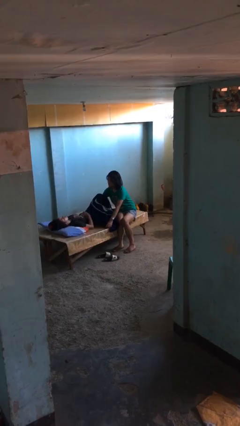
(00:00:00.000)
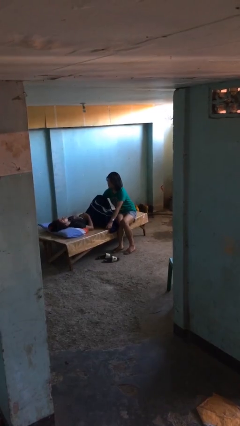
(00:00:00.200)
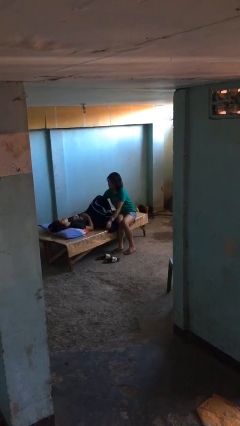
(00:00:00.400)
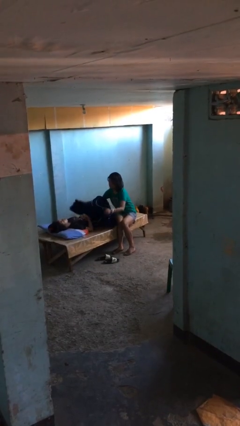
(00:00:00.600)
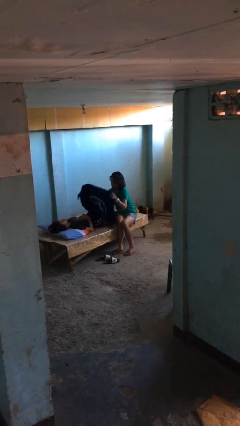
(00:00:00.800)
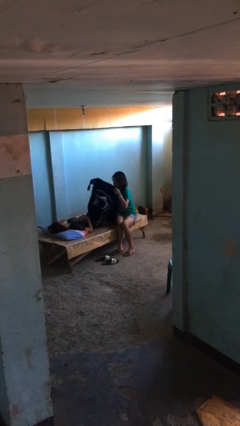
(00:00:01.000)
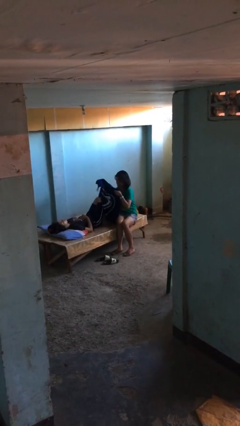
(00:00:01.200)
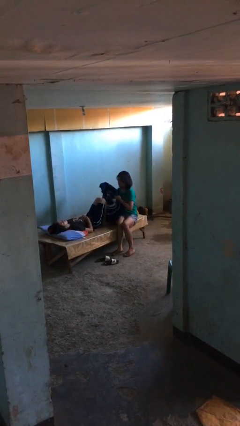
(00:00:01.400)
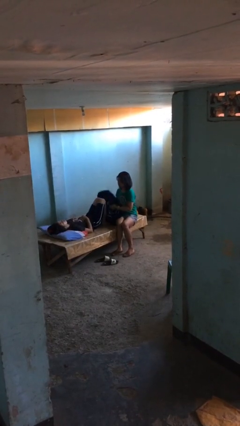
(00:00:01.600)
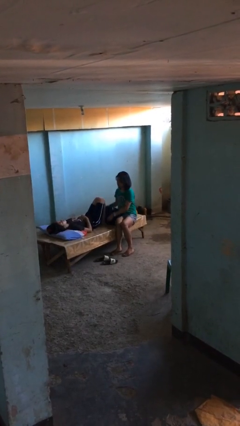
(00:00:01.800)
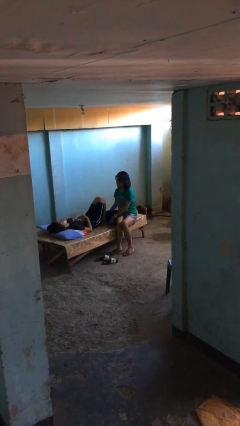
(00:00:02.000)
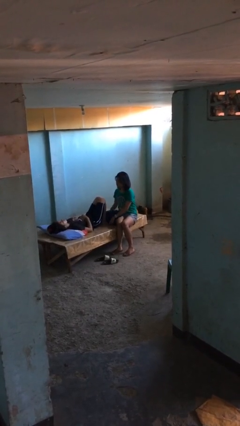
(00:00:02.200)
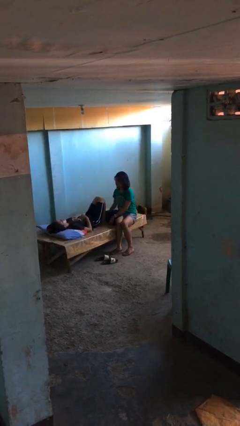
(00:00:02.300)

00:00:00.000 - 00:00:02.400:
person uncovers friend with blanket

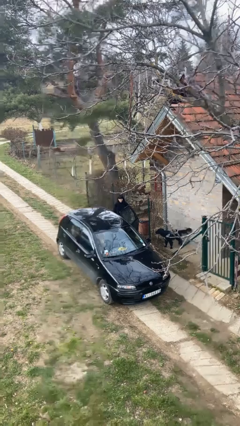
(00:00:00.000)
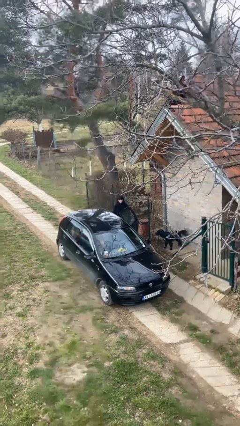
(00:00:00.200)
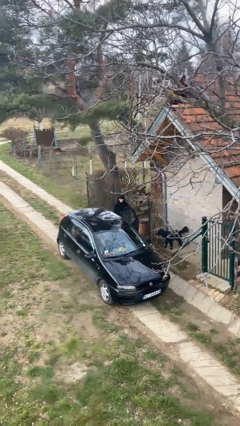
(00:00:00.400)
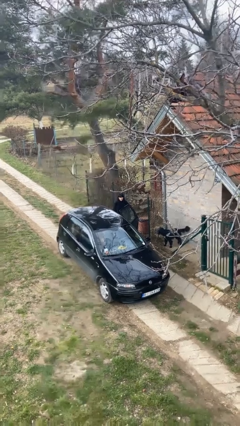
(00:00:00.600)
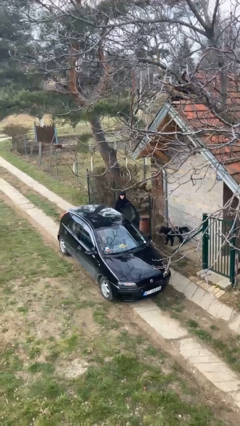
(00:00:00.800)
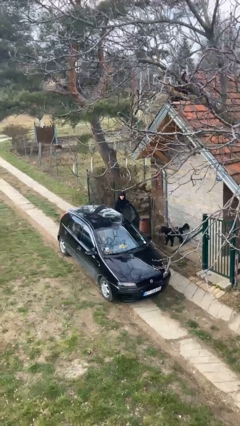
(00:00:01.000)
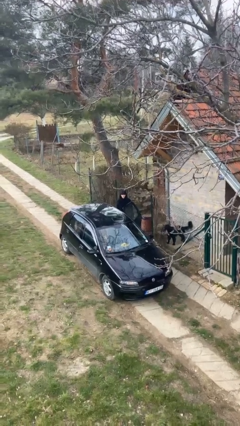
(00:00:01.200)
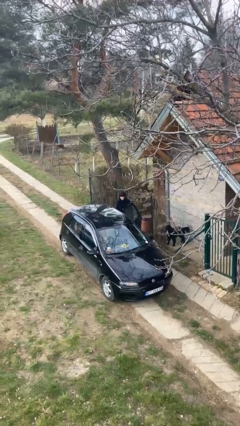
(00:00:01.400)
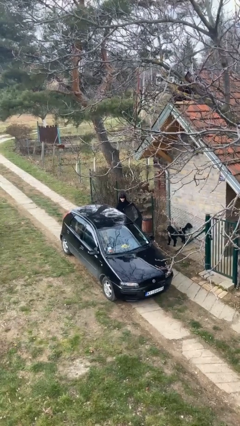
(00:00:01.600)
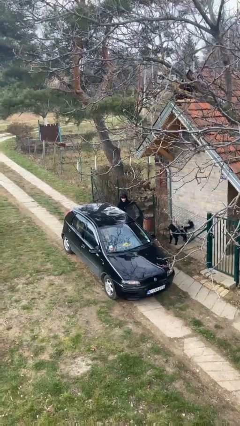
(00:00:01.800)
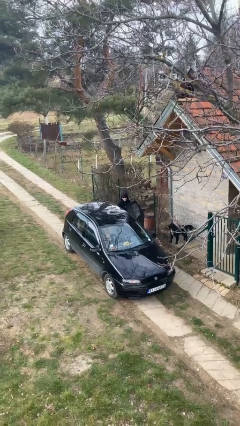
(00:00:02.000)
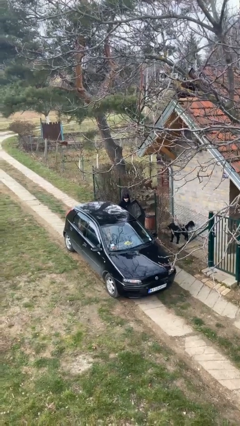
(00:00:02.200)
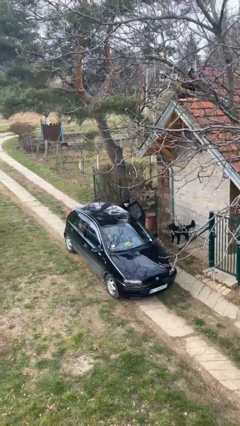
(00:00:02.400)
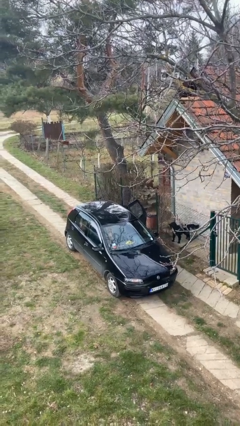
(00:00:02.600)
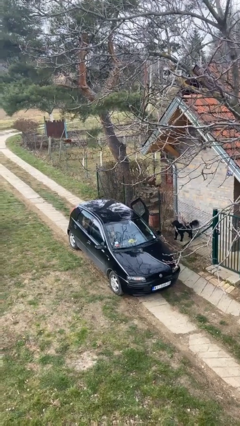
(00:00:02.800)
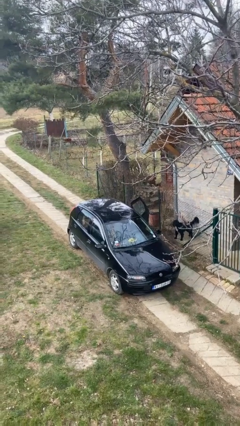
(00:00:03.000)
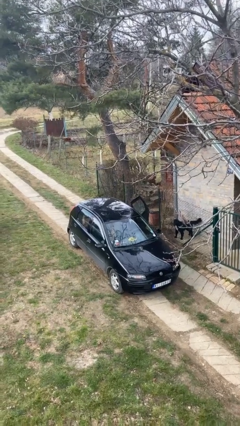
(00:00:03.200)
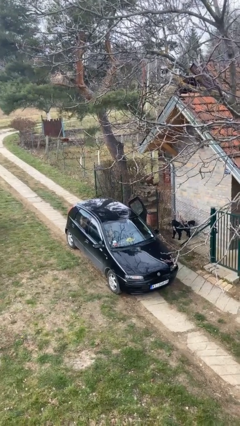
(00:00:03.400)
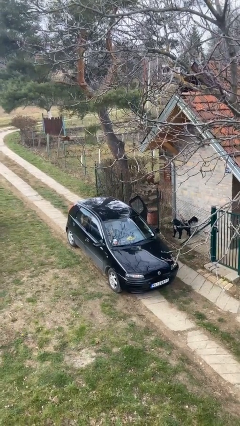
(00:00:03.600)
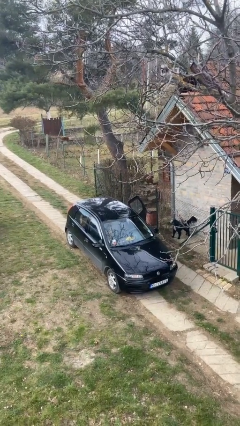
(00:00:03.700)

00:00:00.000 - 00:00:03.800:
person enters car

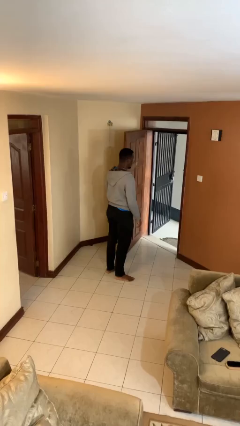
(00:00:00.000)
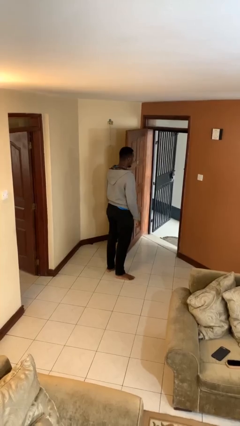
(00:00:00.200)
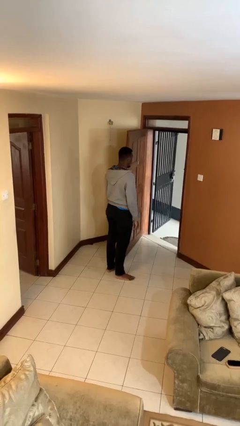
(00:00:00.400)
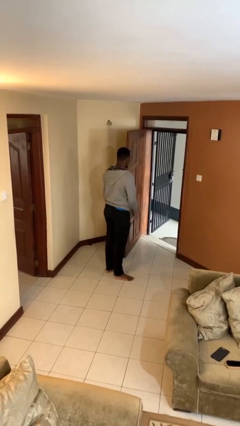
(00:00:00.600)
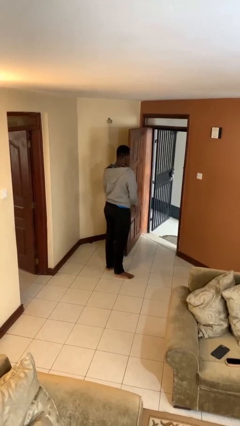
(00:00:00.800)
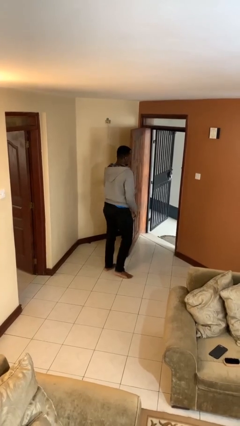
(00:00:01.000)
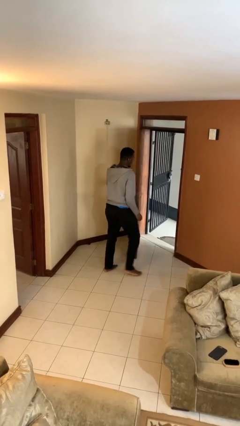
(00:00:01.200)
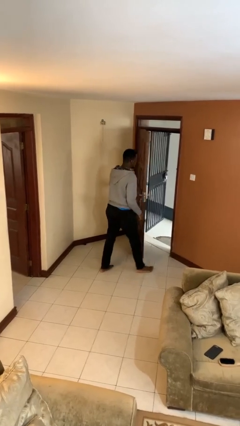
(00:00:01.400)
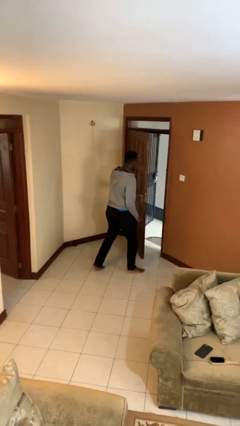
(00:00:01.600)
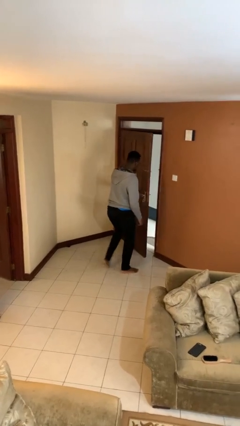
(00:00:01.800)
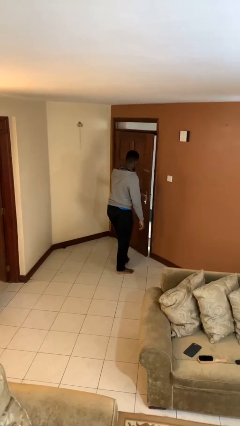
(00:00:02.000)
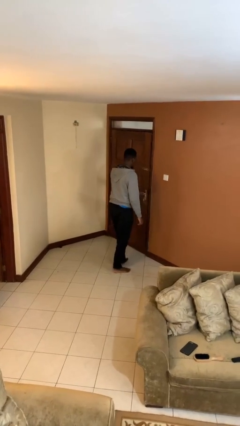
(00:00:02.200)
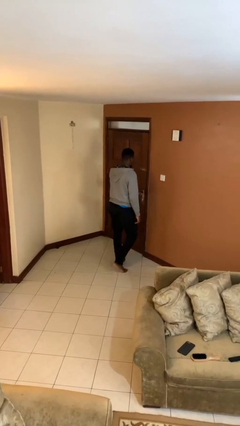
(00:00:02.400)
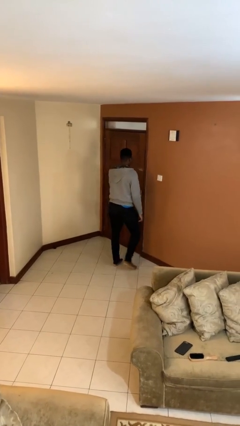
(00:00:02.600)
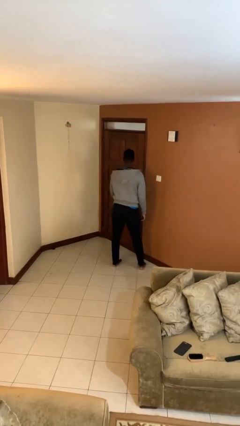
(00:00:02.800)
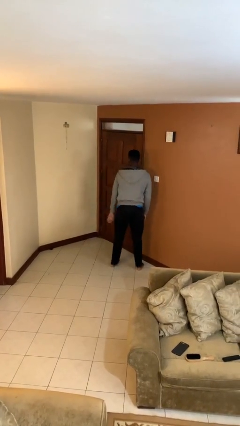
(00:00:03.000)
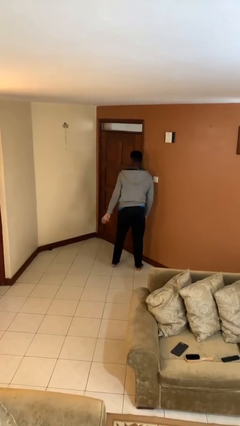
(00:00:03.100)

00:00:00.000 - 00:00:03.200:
person closes facility door

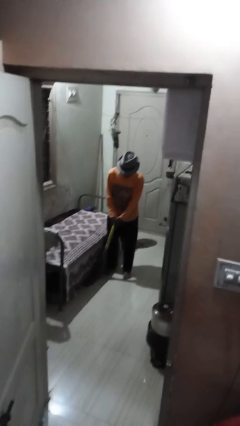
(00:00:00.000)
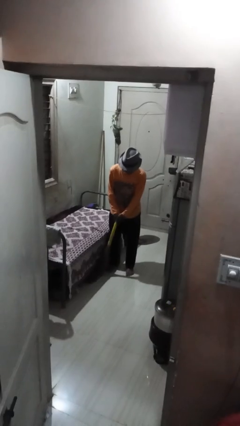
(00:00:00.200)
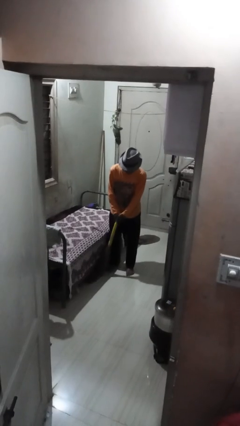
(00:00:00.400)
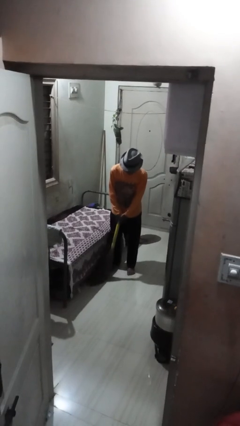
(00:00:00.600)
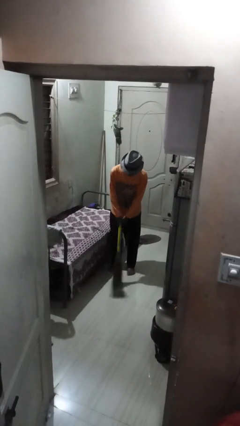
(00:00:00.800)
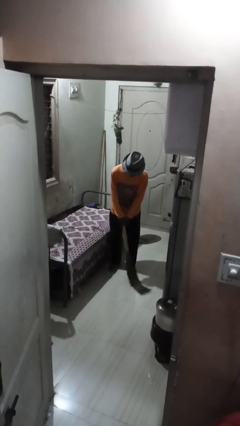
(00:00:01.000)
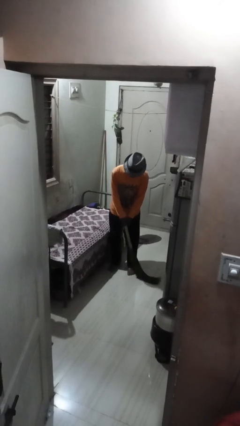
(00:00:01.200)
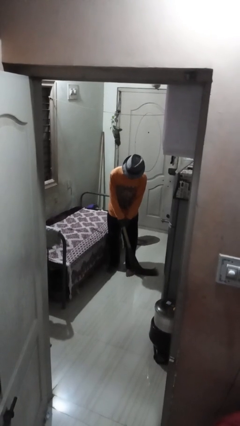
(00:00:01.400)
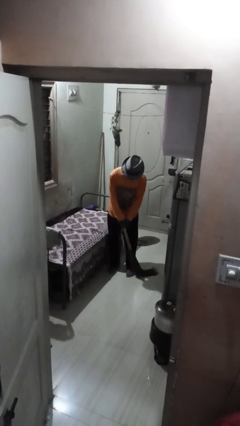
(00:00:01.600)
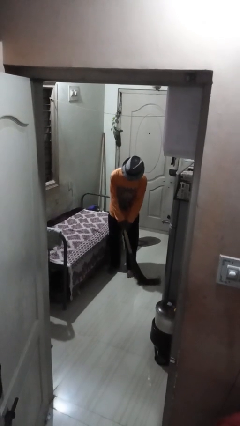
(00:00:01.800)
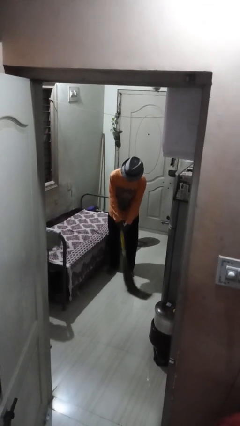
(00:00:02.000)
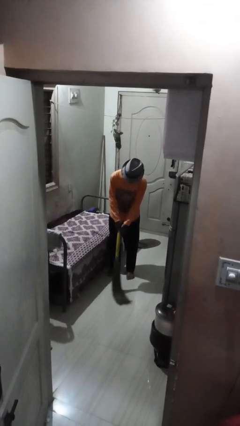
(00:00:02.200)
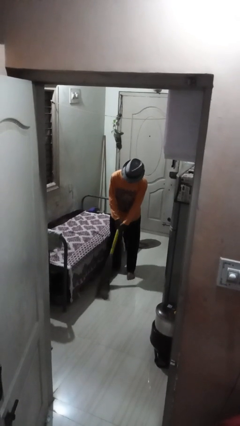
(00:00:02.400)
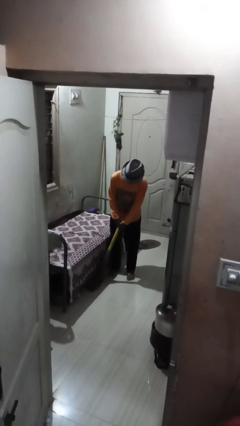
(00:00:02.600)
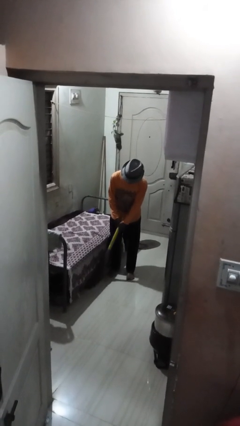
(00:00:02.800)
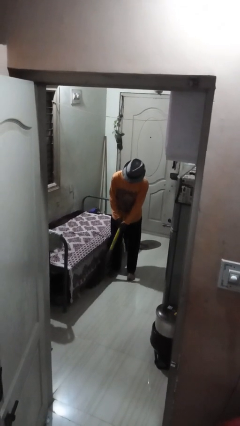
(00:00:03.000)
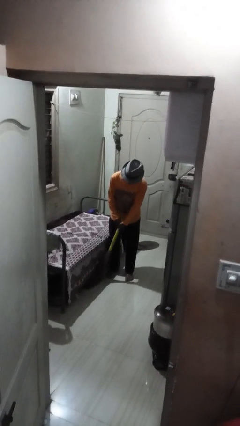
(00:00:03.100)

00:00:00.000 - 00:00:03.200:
person sweeps floor

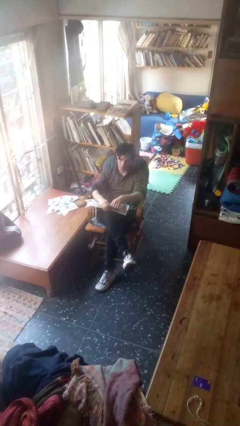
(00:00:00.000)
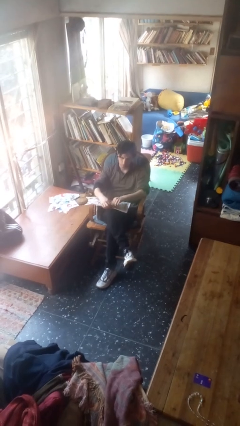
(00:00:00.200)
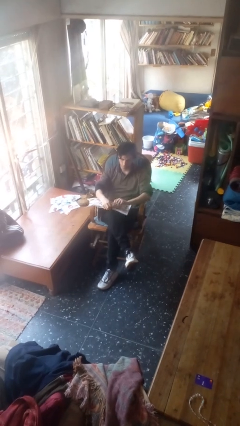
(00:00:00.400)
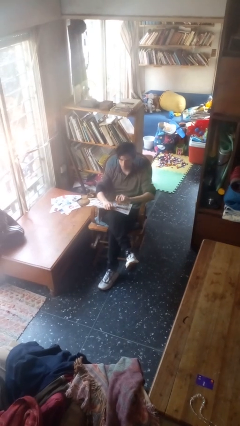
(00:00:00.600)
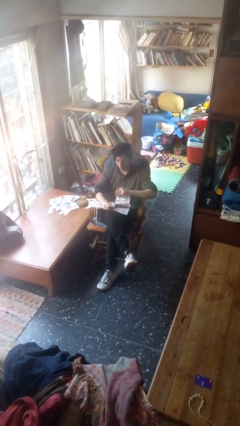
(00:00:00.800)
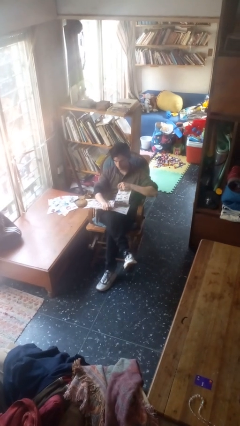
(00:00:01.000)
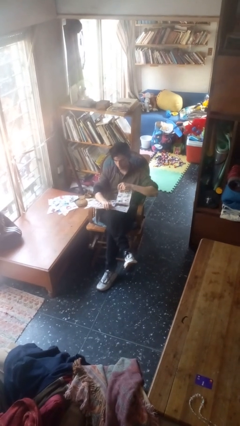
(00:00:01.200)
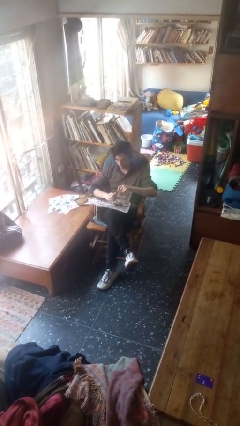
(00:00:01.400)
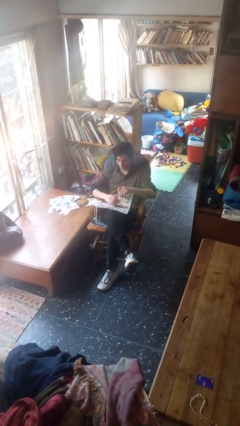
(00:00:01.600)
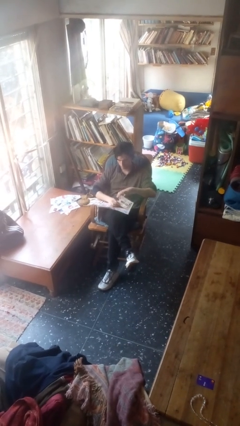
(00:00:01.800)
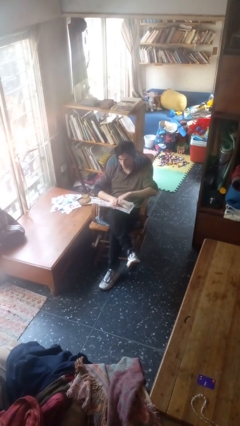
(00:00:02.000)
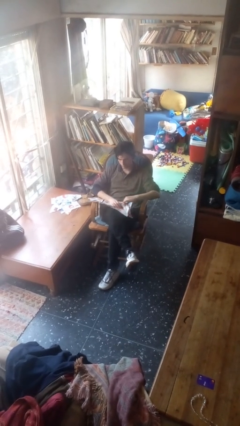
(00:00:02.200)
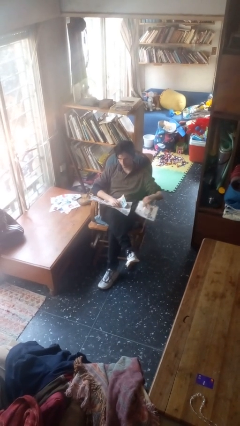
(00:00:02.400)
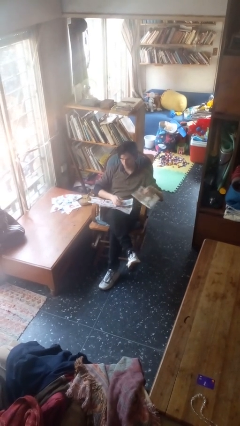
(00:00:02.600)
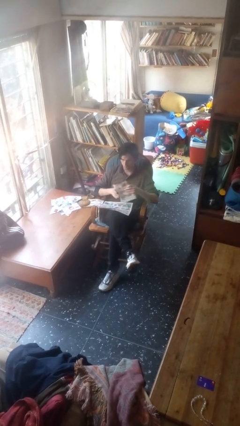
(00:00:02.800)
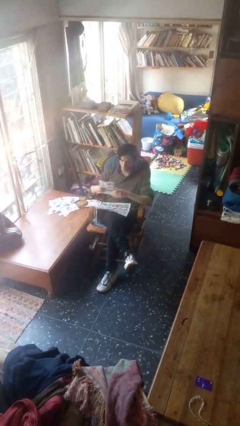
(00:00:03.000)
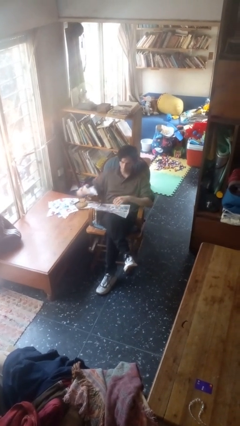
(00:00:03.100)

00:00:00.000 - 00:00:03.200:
person tears paper

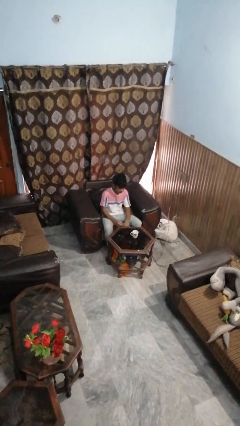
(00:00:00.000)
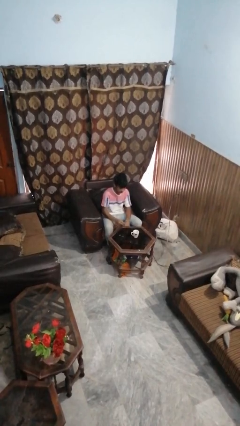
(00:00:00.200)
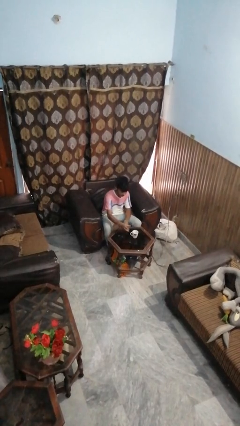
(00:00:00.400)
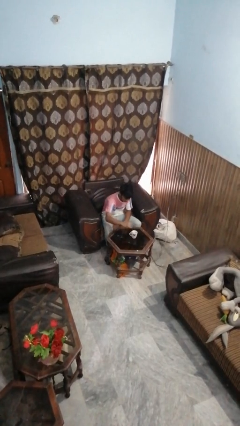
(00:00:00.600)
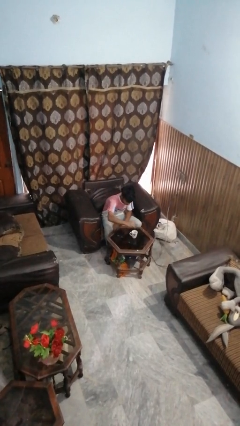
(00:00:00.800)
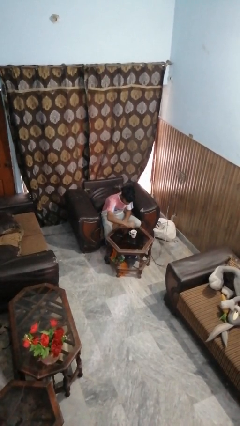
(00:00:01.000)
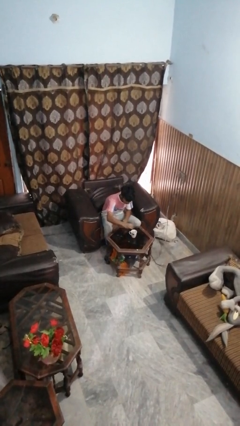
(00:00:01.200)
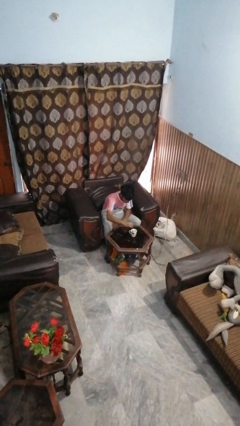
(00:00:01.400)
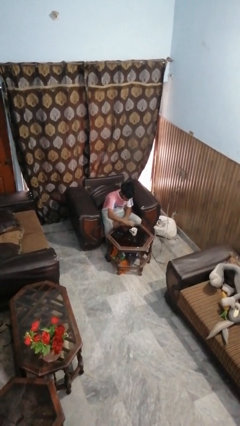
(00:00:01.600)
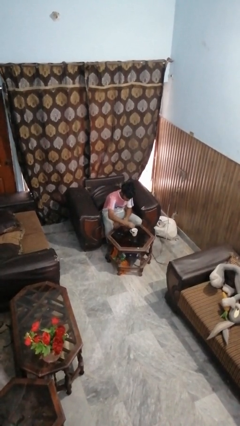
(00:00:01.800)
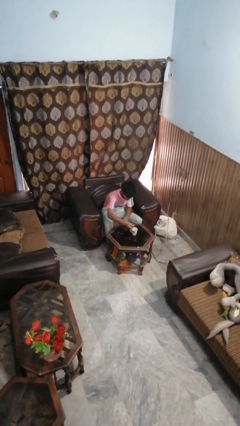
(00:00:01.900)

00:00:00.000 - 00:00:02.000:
person stirs mug
